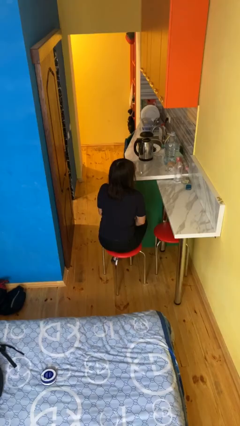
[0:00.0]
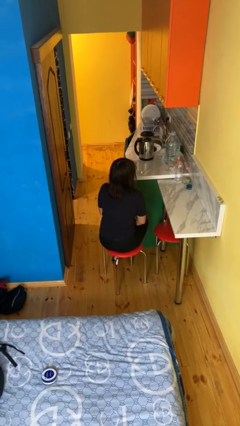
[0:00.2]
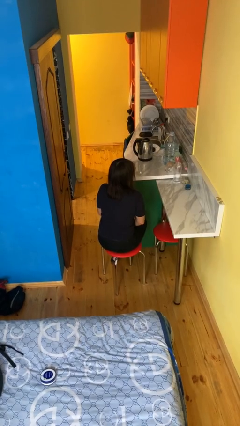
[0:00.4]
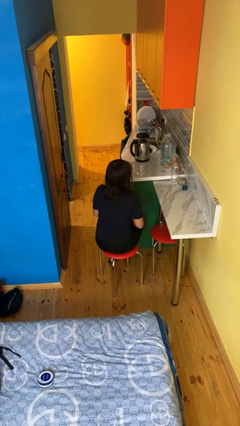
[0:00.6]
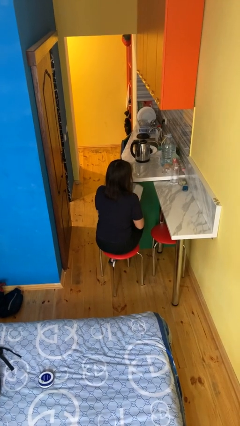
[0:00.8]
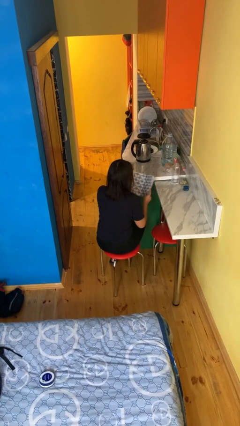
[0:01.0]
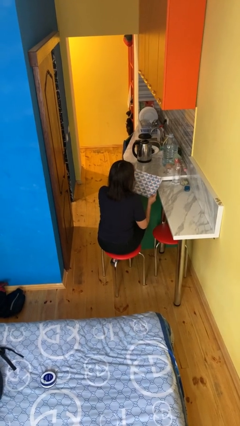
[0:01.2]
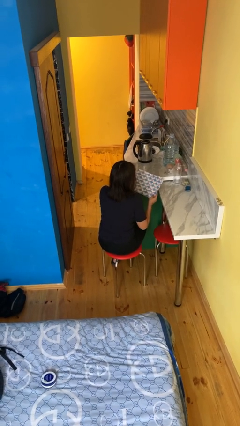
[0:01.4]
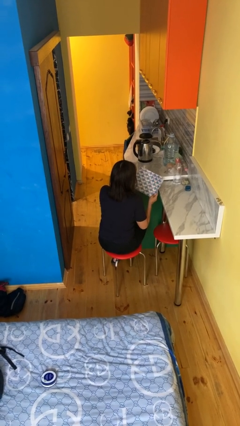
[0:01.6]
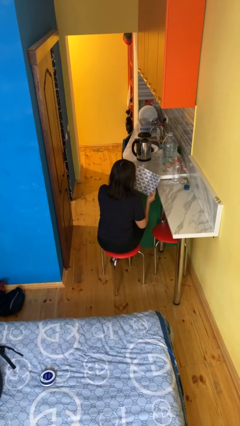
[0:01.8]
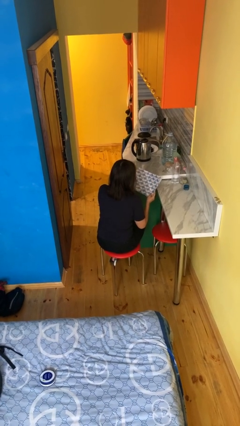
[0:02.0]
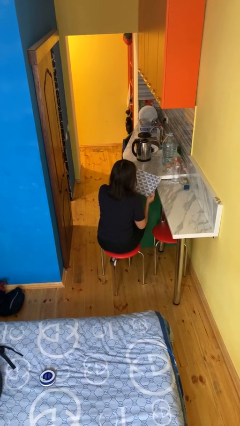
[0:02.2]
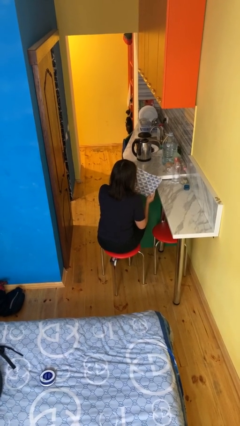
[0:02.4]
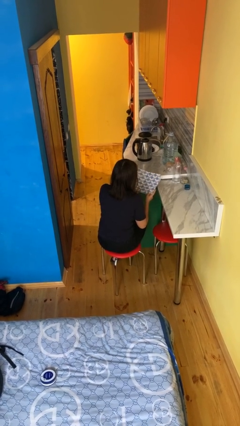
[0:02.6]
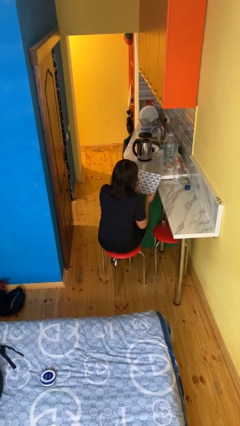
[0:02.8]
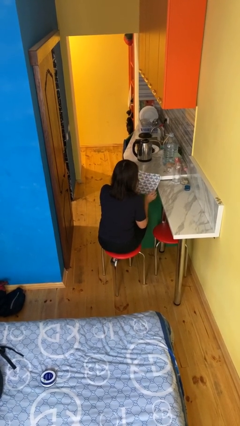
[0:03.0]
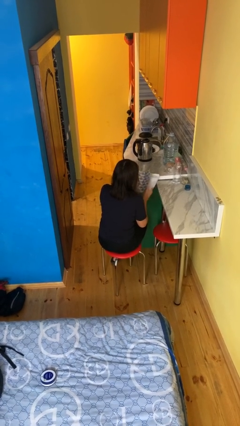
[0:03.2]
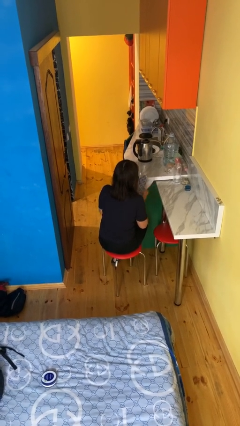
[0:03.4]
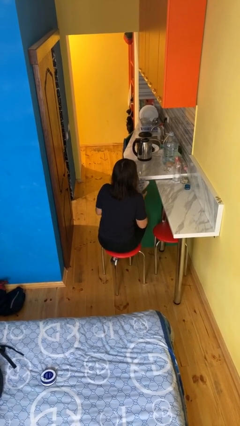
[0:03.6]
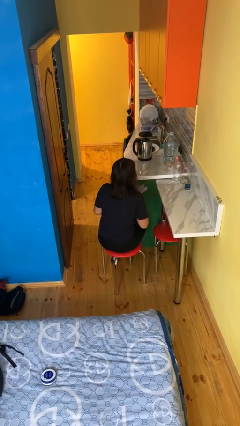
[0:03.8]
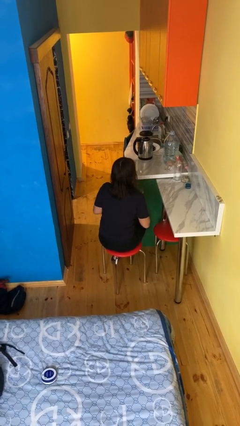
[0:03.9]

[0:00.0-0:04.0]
person reads magazine

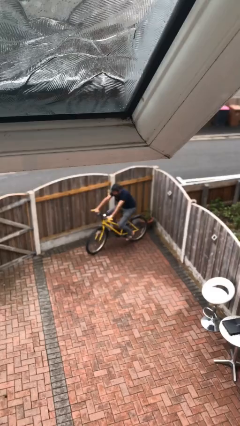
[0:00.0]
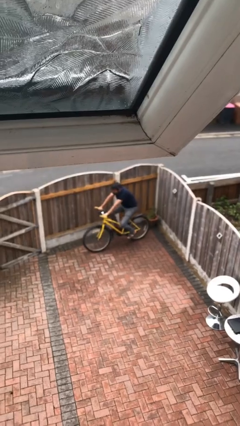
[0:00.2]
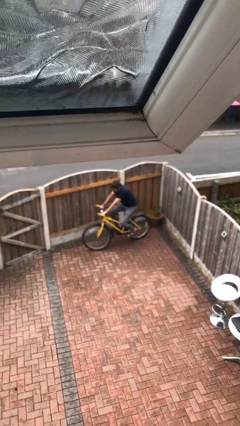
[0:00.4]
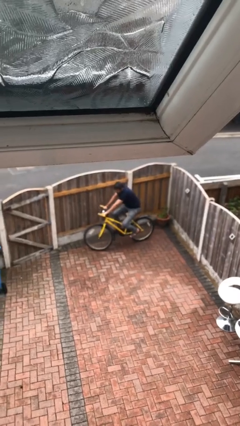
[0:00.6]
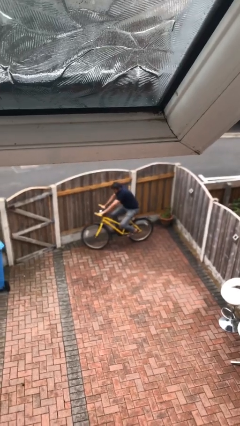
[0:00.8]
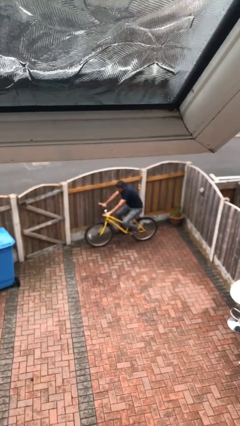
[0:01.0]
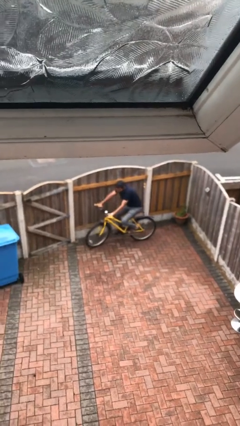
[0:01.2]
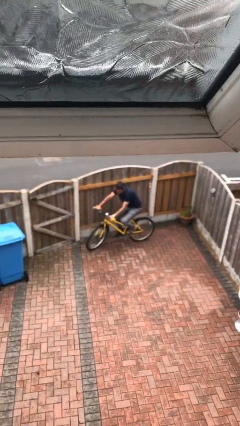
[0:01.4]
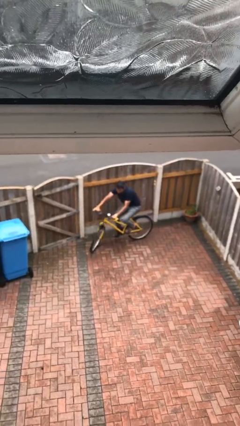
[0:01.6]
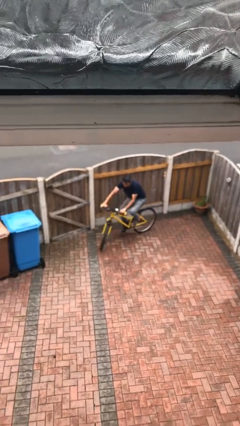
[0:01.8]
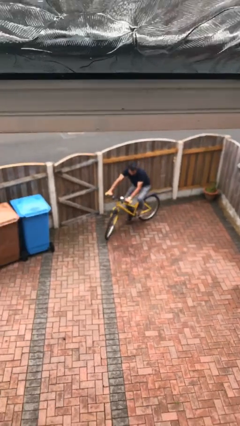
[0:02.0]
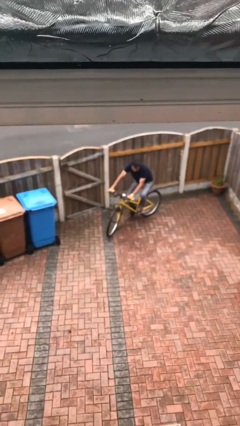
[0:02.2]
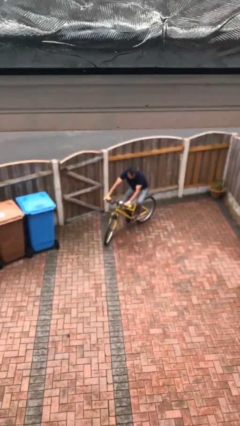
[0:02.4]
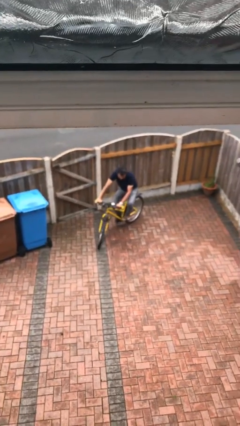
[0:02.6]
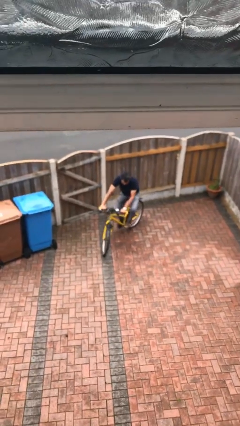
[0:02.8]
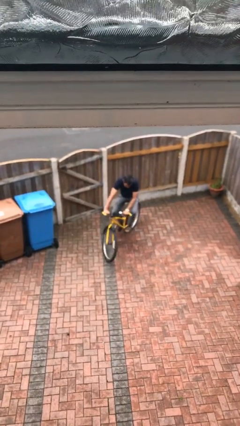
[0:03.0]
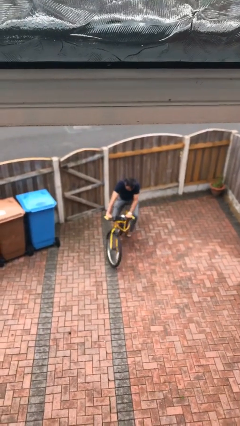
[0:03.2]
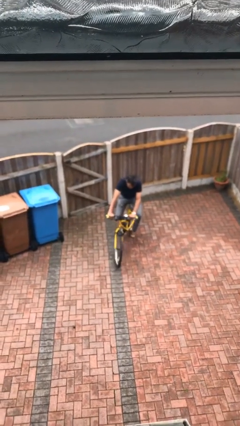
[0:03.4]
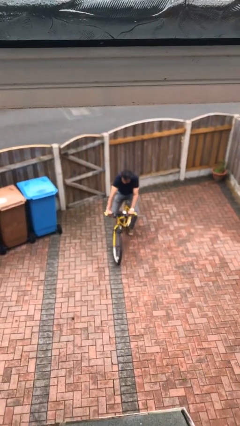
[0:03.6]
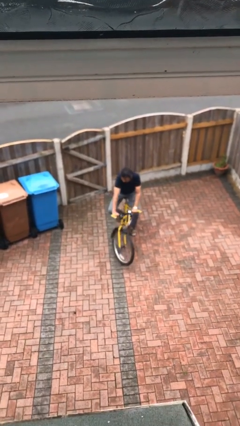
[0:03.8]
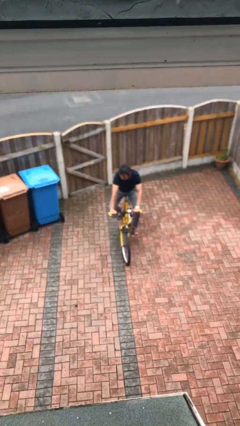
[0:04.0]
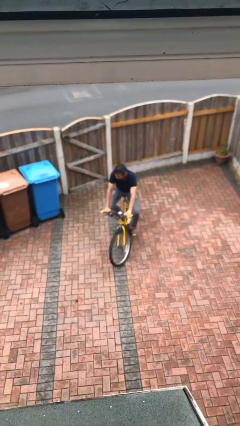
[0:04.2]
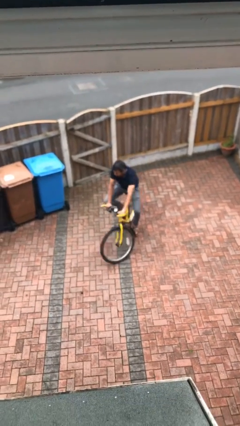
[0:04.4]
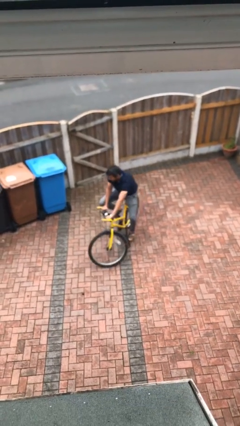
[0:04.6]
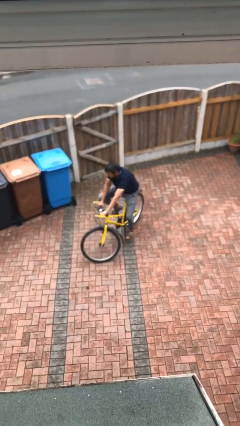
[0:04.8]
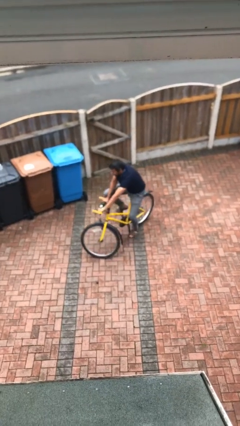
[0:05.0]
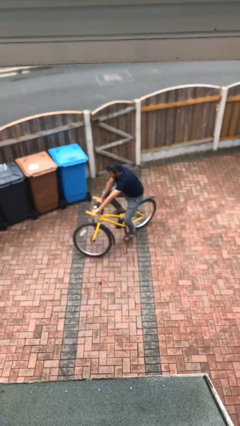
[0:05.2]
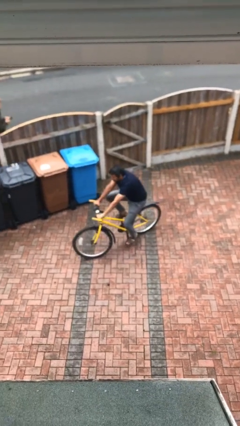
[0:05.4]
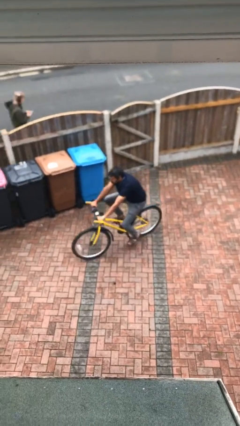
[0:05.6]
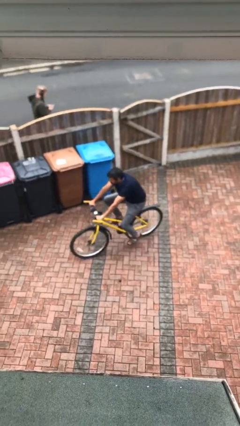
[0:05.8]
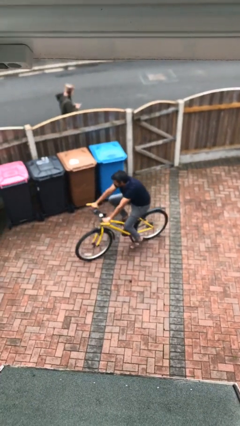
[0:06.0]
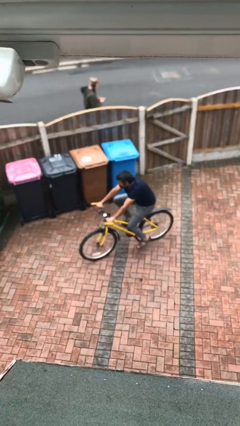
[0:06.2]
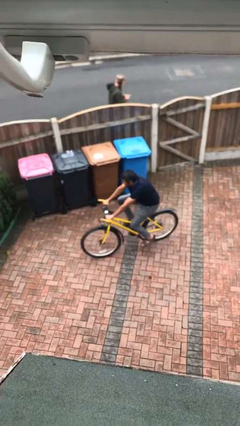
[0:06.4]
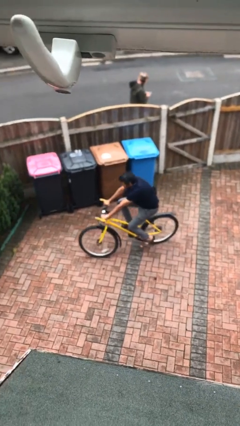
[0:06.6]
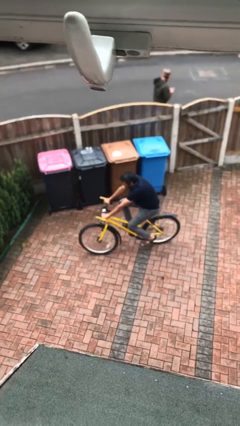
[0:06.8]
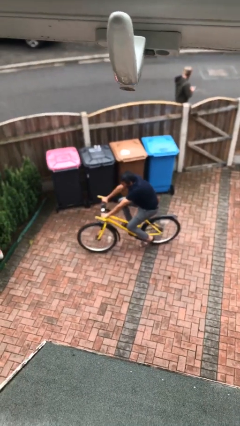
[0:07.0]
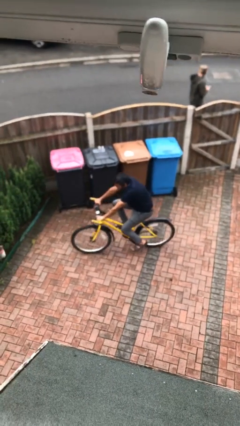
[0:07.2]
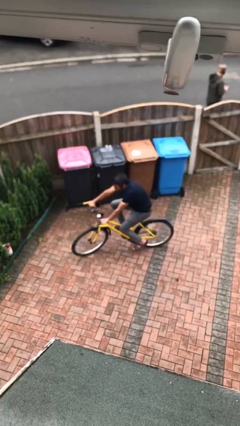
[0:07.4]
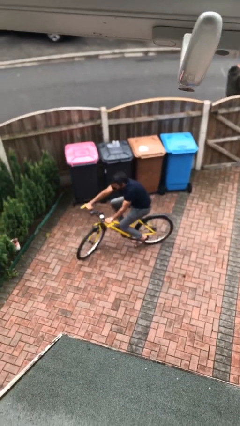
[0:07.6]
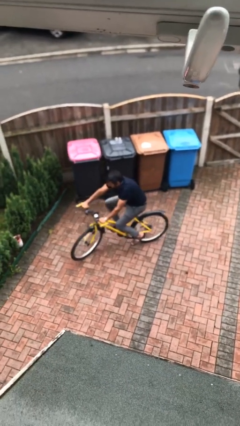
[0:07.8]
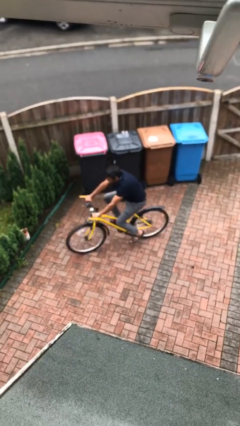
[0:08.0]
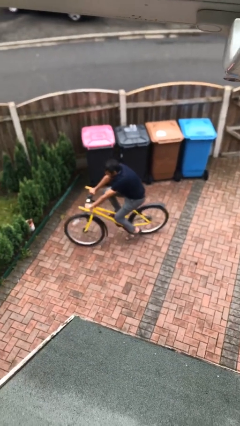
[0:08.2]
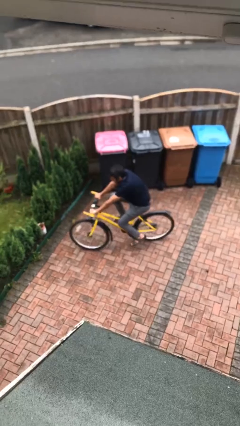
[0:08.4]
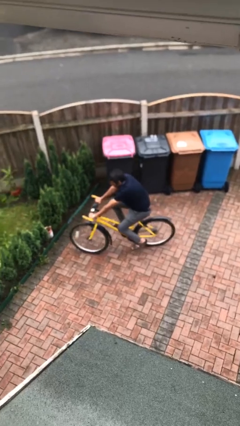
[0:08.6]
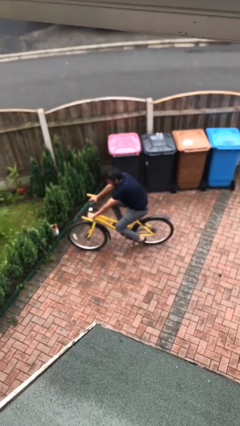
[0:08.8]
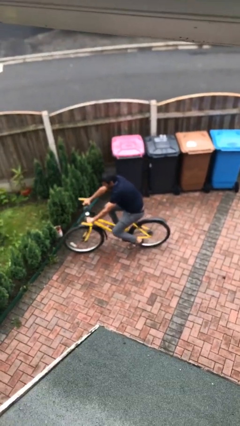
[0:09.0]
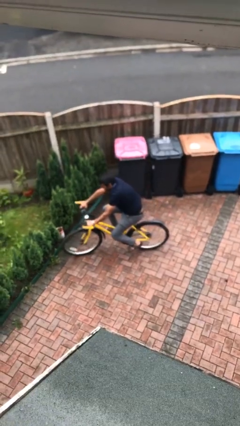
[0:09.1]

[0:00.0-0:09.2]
person rides bicycle

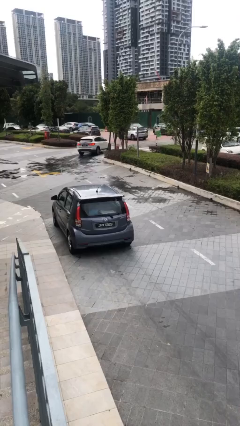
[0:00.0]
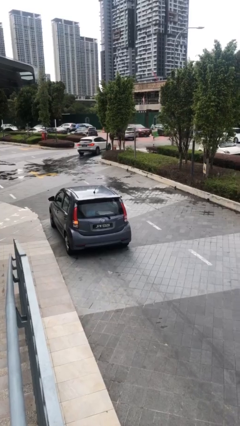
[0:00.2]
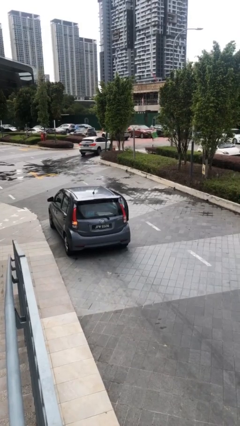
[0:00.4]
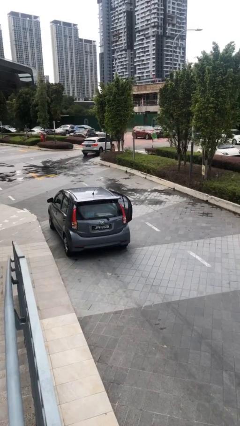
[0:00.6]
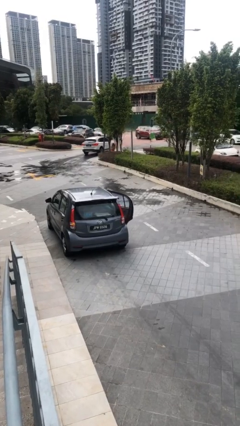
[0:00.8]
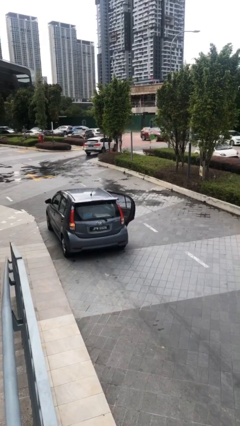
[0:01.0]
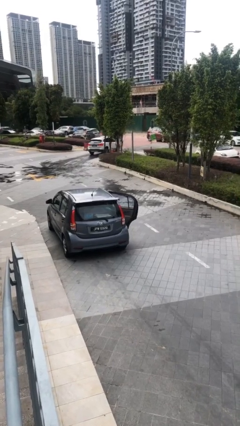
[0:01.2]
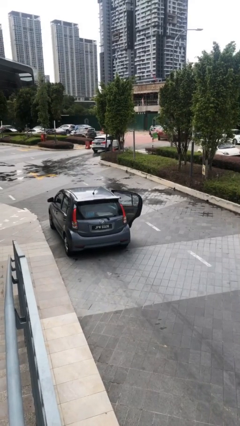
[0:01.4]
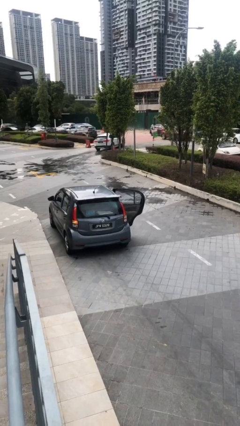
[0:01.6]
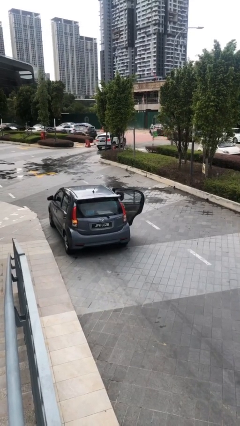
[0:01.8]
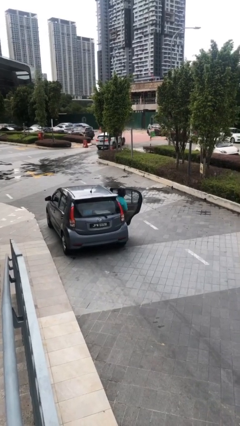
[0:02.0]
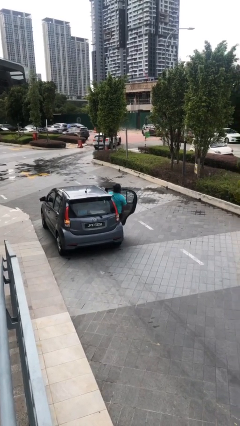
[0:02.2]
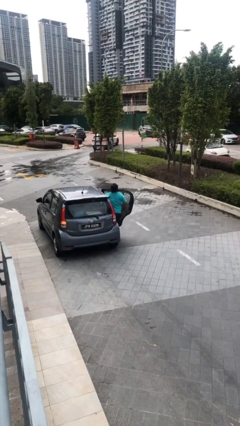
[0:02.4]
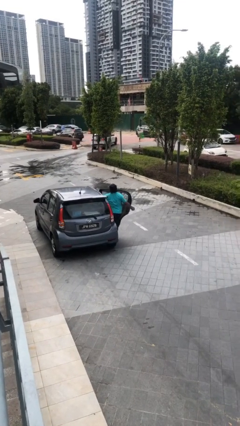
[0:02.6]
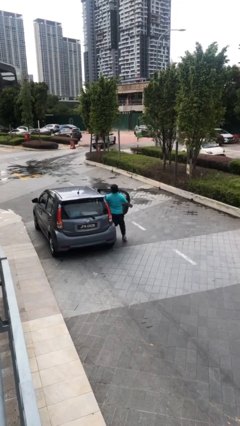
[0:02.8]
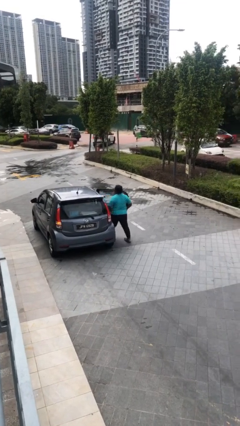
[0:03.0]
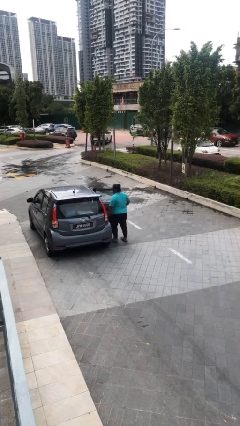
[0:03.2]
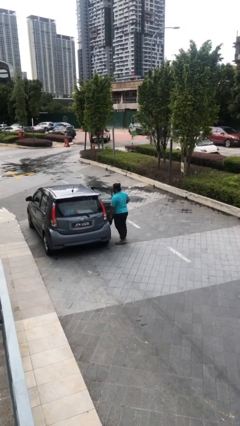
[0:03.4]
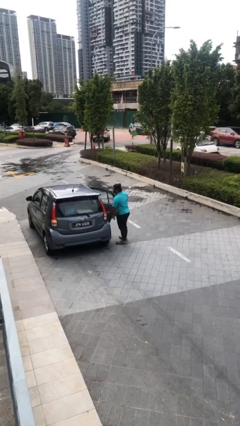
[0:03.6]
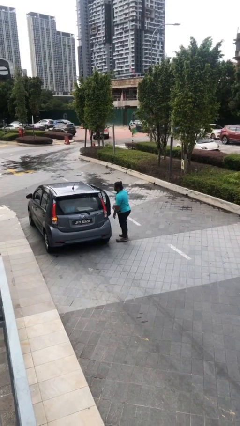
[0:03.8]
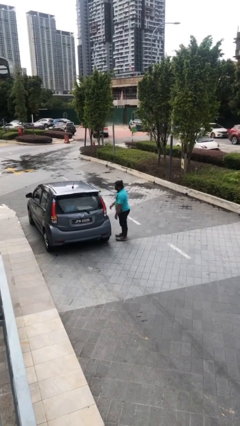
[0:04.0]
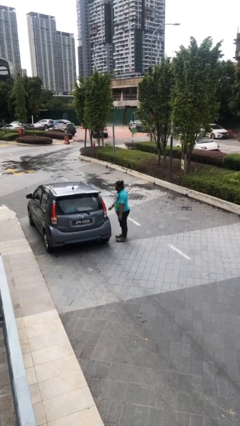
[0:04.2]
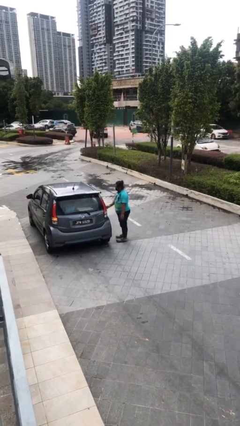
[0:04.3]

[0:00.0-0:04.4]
car drops off person

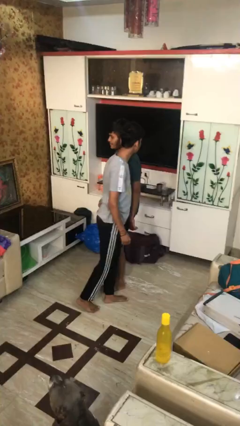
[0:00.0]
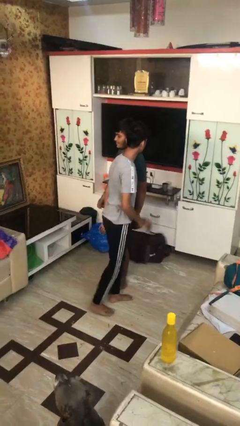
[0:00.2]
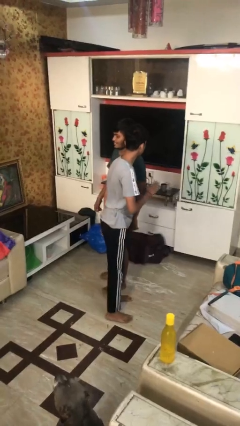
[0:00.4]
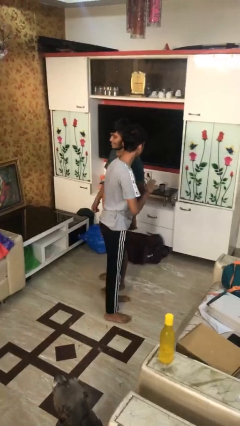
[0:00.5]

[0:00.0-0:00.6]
person bumps into person
